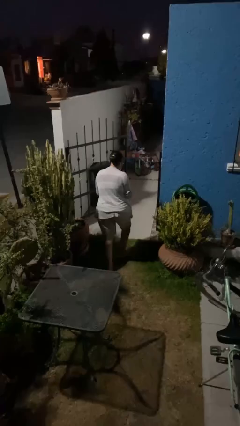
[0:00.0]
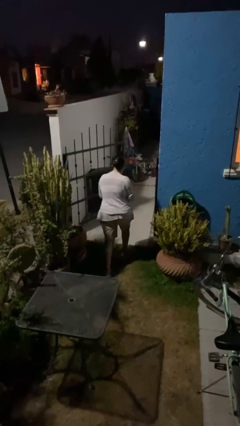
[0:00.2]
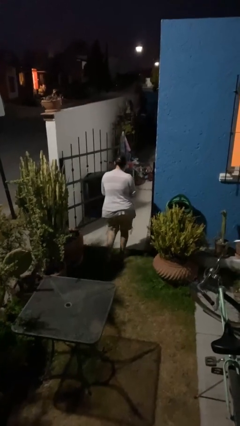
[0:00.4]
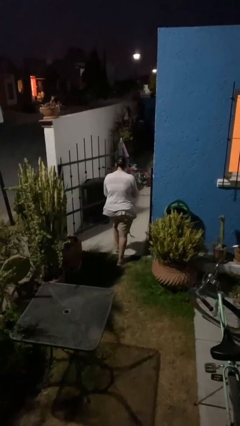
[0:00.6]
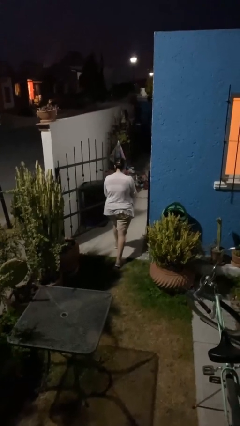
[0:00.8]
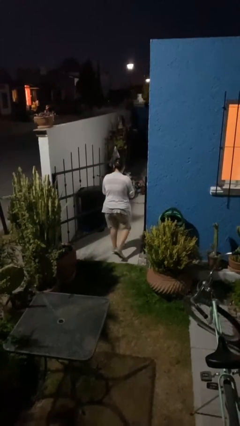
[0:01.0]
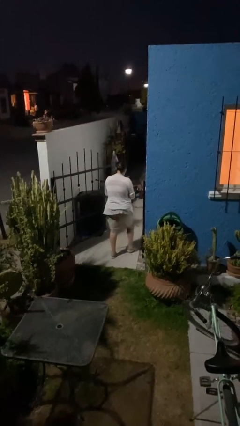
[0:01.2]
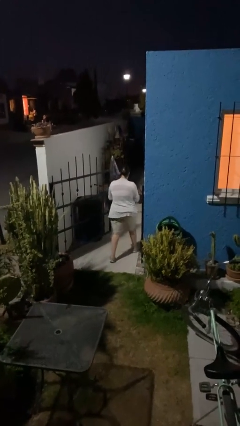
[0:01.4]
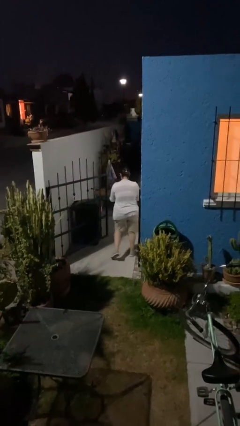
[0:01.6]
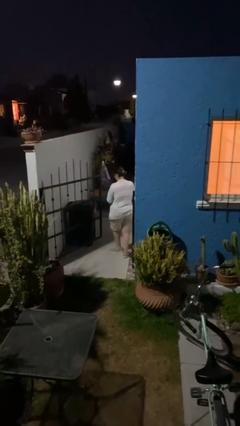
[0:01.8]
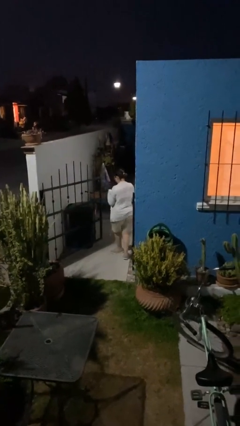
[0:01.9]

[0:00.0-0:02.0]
person exits scene through structure

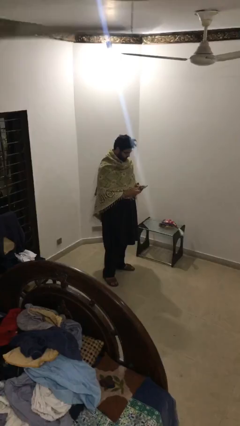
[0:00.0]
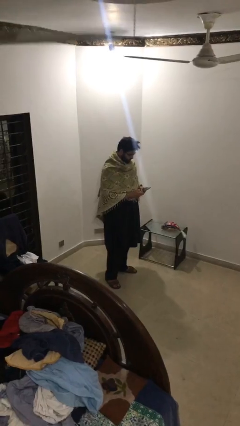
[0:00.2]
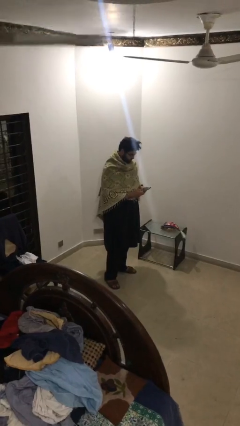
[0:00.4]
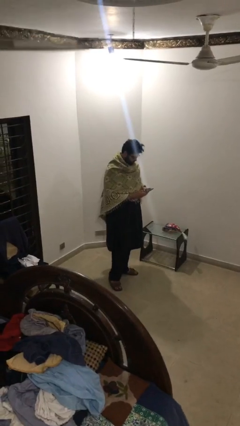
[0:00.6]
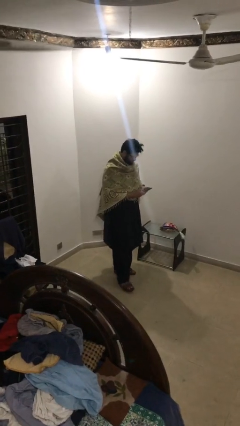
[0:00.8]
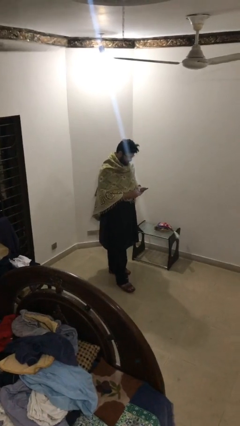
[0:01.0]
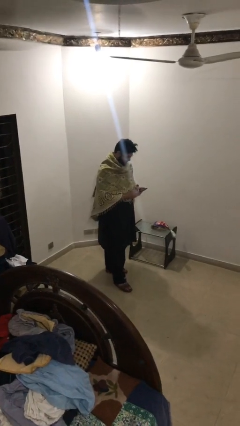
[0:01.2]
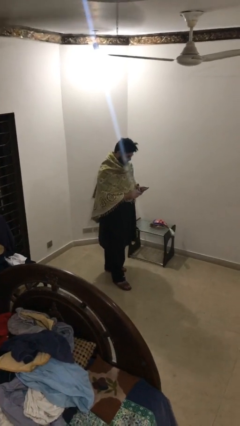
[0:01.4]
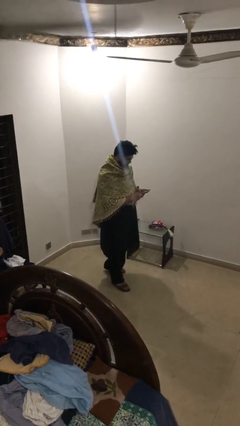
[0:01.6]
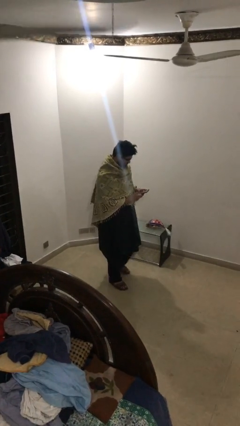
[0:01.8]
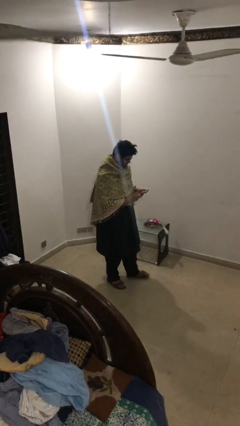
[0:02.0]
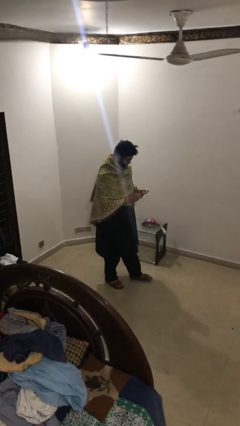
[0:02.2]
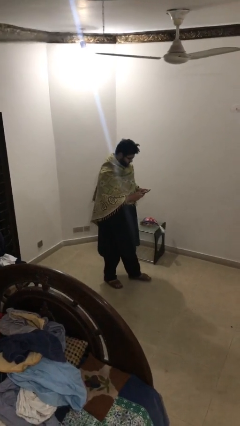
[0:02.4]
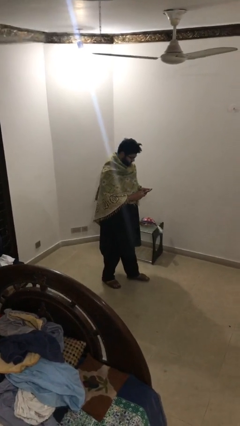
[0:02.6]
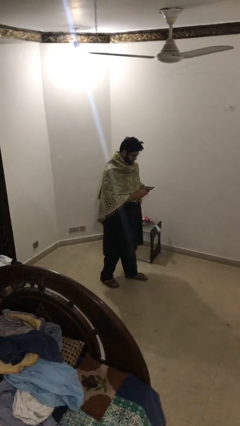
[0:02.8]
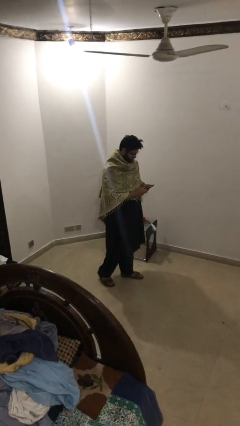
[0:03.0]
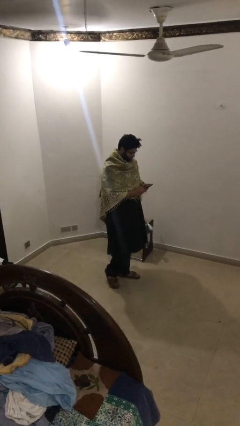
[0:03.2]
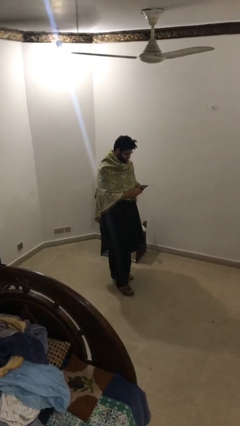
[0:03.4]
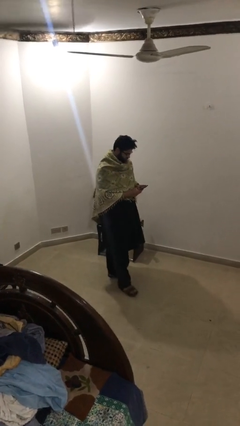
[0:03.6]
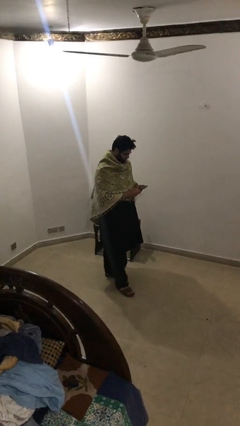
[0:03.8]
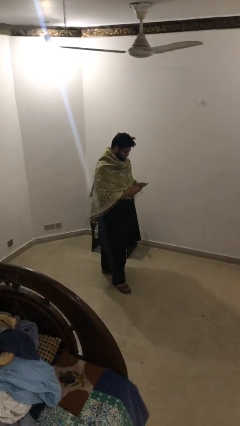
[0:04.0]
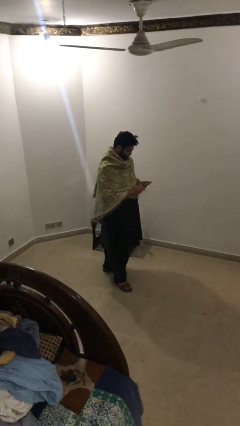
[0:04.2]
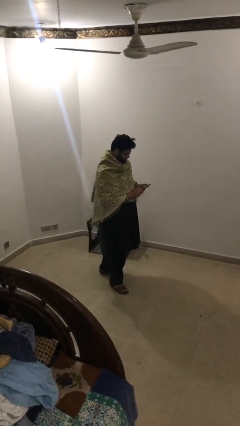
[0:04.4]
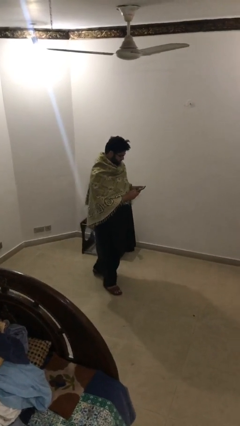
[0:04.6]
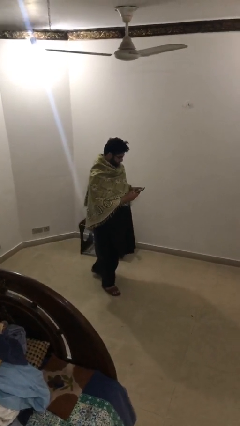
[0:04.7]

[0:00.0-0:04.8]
person texts on phone

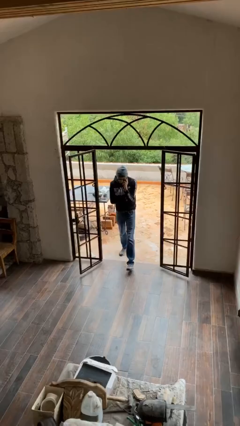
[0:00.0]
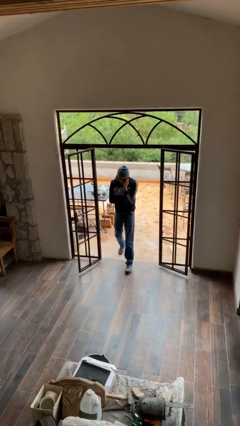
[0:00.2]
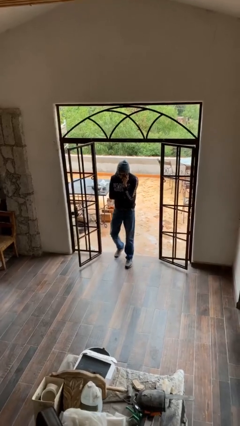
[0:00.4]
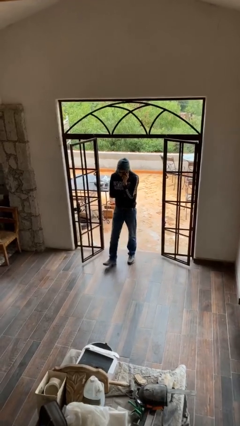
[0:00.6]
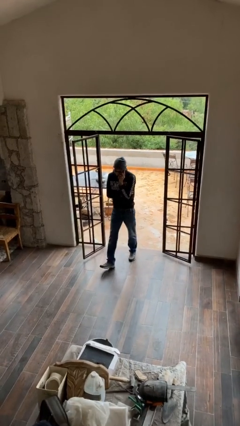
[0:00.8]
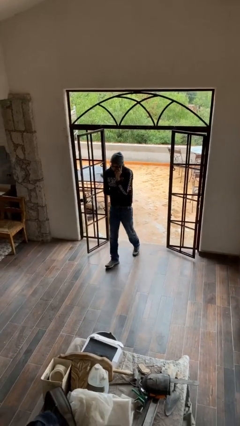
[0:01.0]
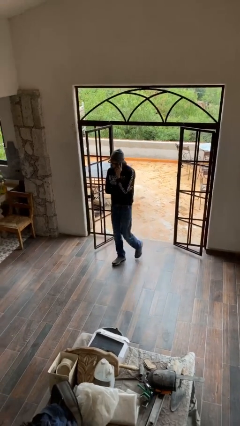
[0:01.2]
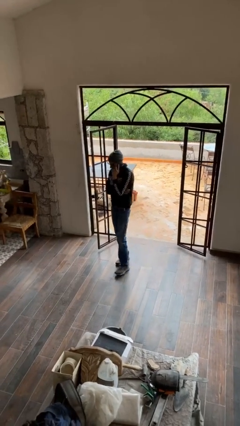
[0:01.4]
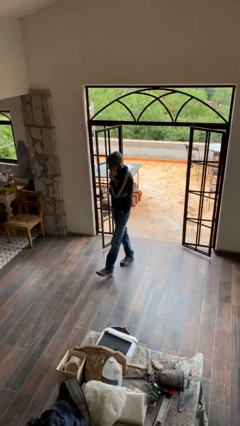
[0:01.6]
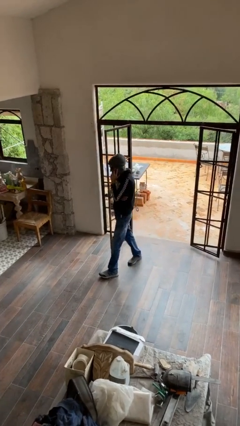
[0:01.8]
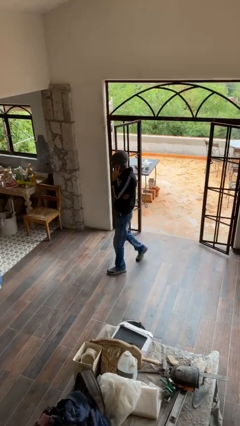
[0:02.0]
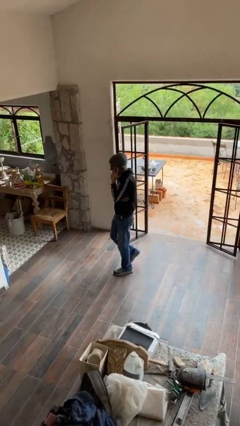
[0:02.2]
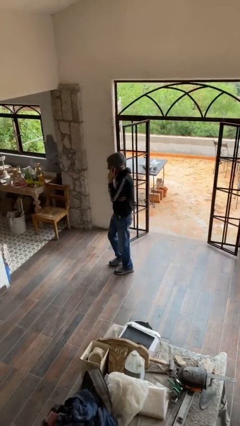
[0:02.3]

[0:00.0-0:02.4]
person enters scene through structure

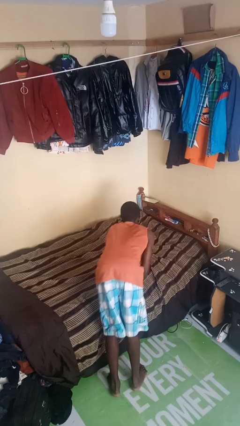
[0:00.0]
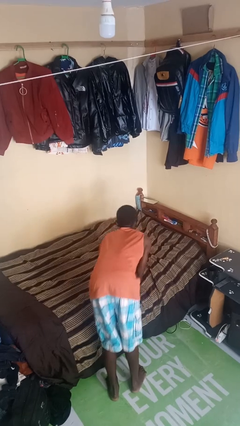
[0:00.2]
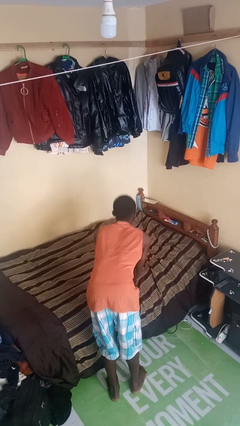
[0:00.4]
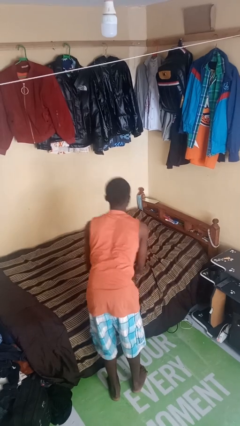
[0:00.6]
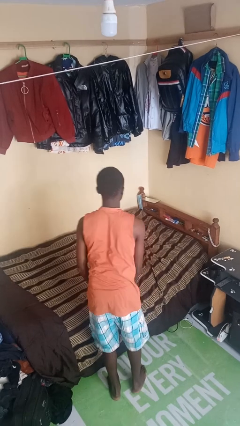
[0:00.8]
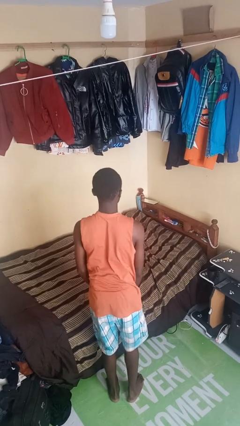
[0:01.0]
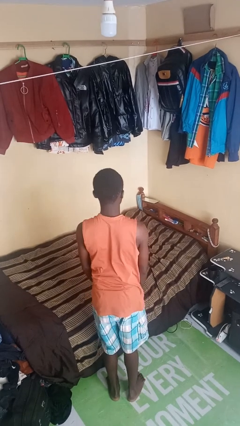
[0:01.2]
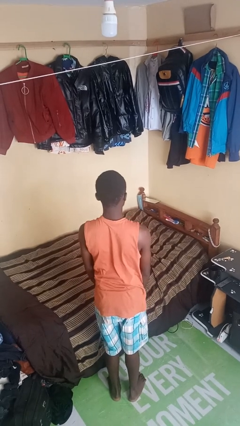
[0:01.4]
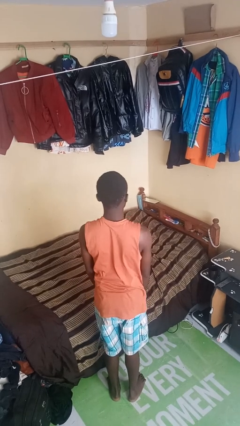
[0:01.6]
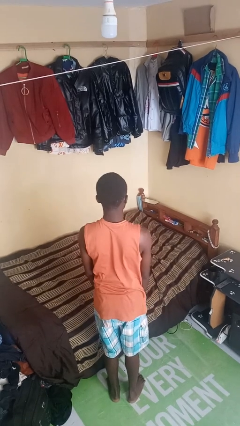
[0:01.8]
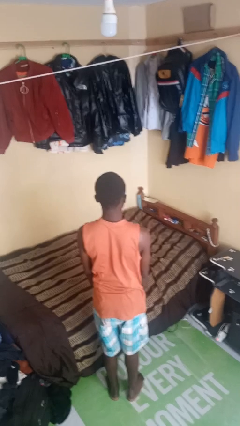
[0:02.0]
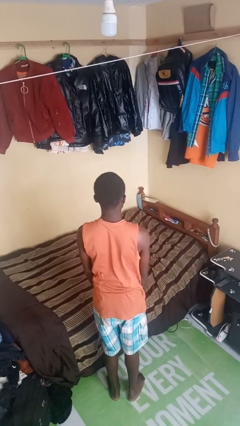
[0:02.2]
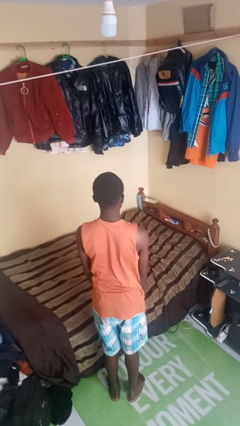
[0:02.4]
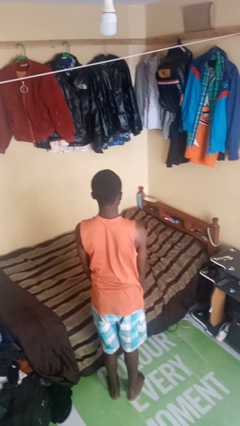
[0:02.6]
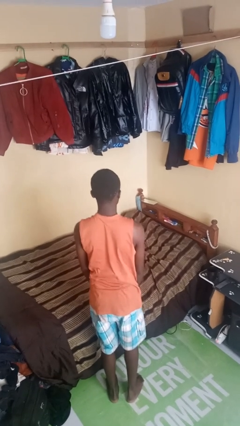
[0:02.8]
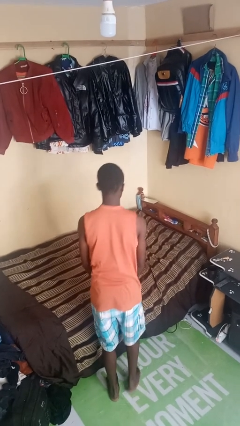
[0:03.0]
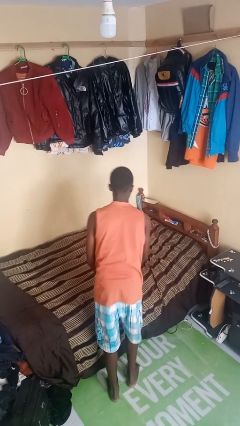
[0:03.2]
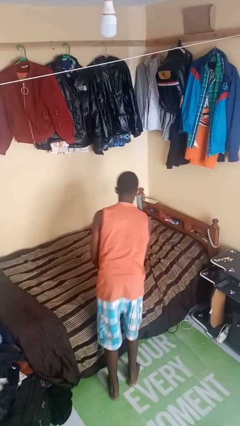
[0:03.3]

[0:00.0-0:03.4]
person stands up

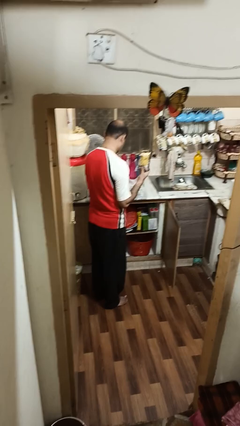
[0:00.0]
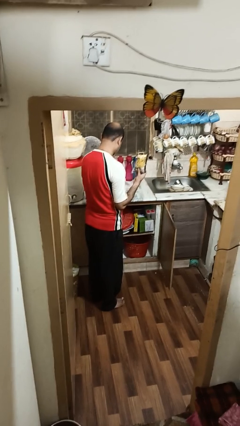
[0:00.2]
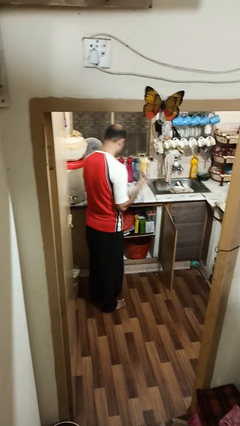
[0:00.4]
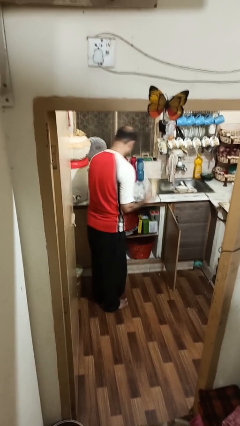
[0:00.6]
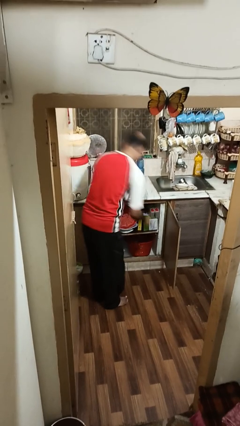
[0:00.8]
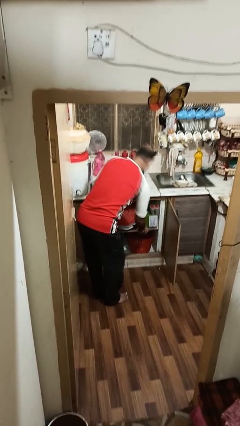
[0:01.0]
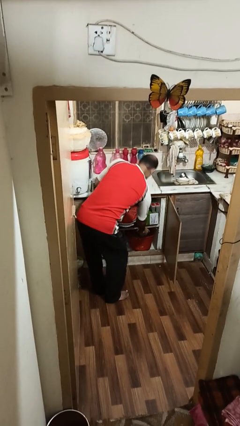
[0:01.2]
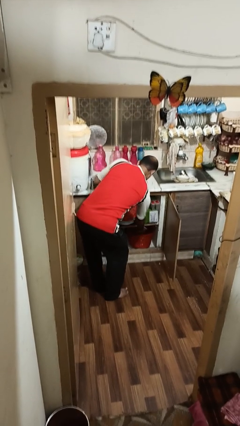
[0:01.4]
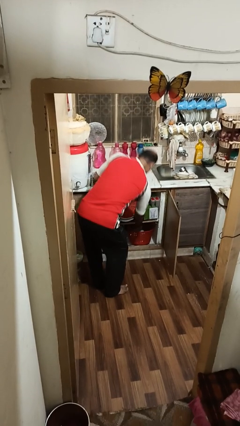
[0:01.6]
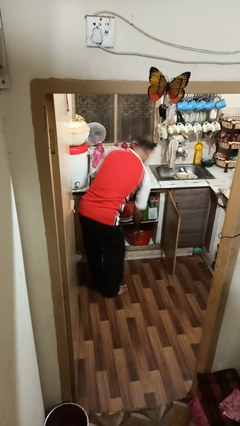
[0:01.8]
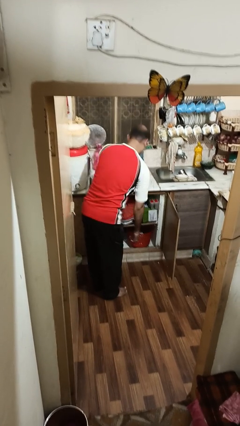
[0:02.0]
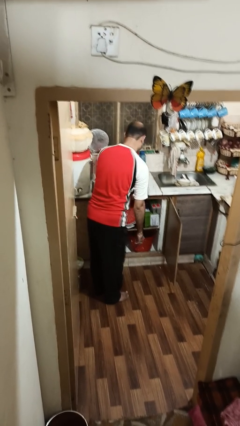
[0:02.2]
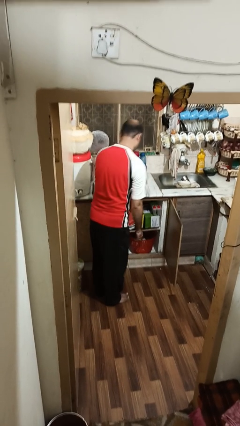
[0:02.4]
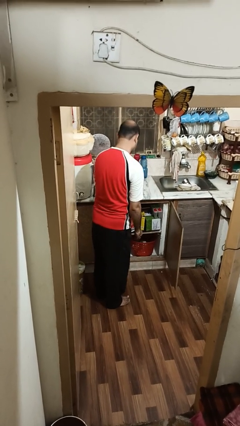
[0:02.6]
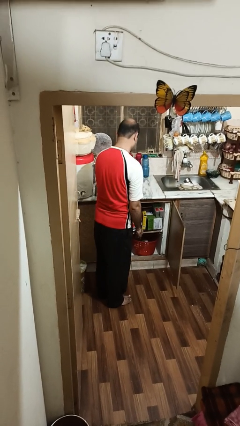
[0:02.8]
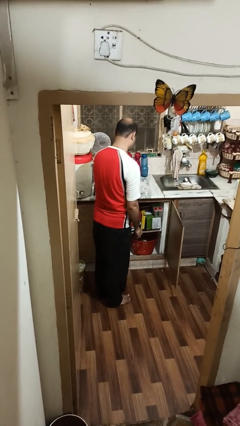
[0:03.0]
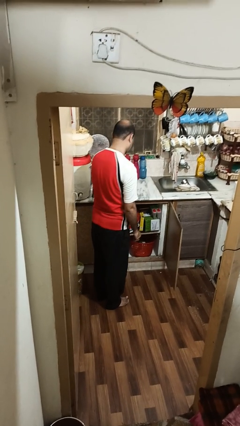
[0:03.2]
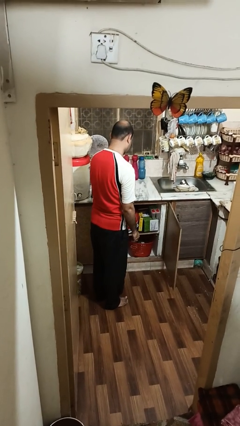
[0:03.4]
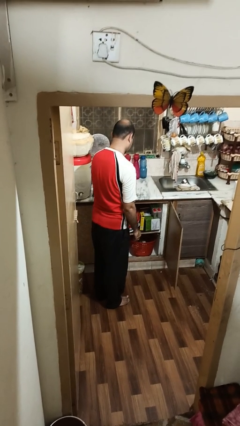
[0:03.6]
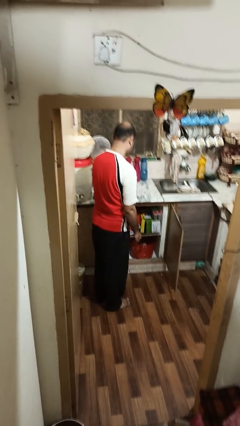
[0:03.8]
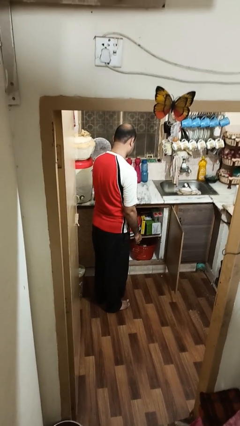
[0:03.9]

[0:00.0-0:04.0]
person puts object in cabinet

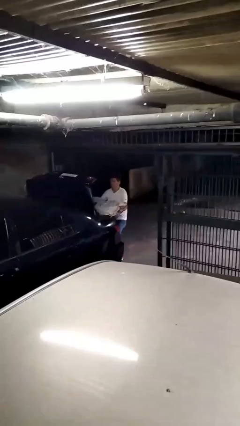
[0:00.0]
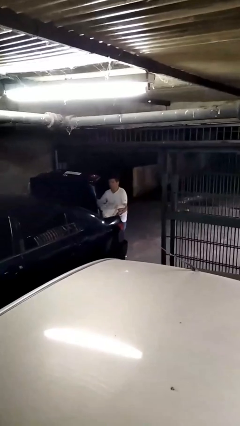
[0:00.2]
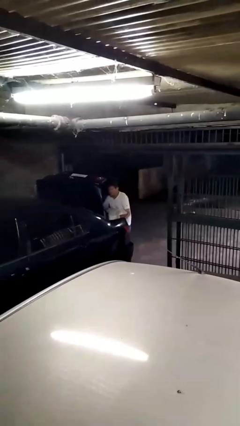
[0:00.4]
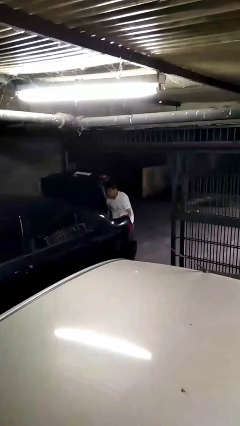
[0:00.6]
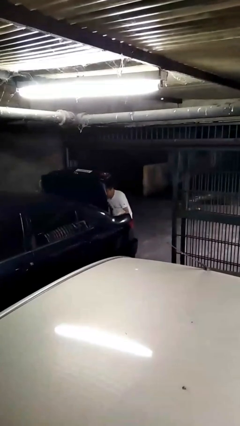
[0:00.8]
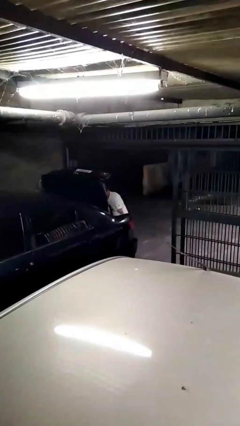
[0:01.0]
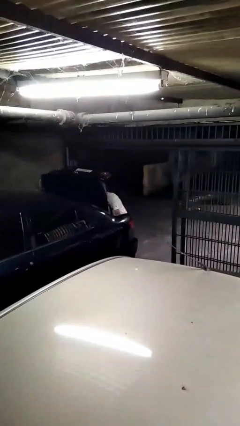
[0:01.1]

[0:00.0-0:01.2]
person loads car
